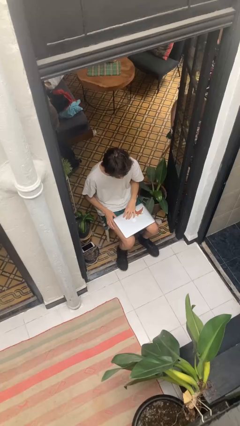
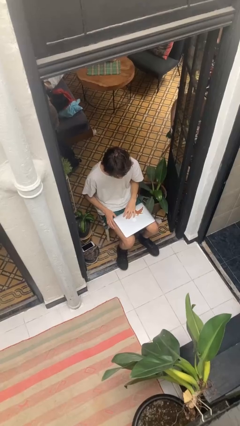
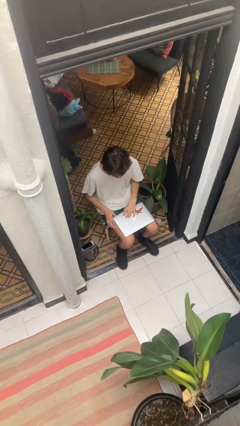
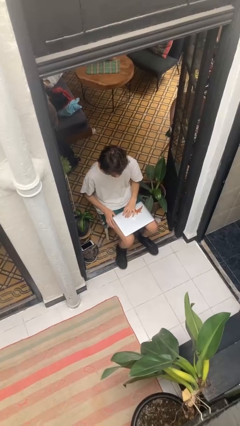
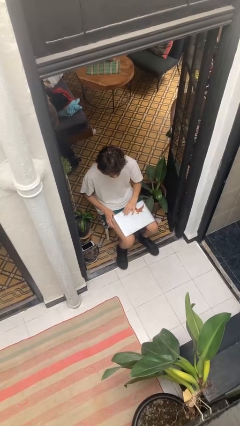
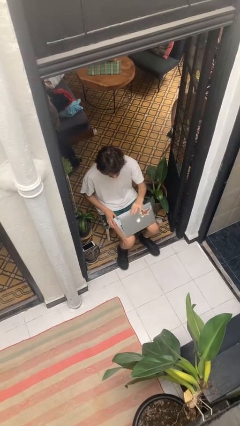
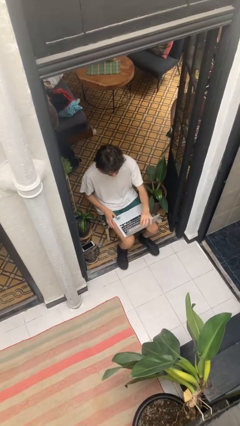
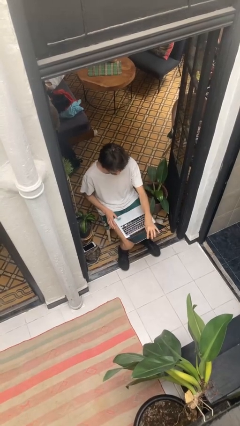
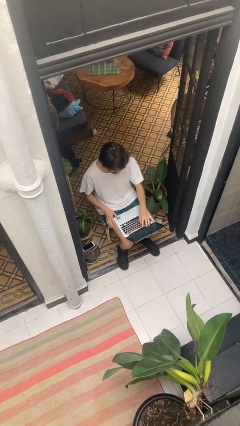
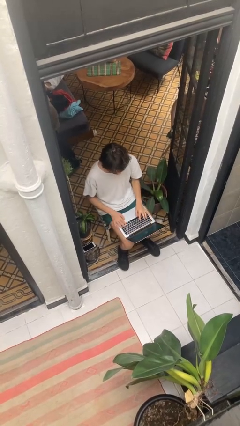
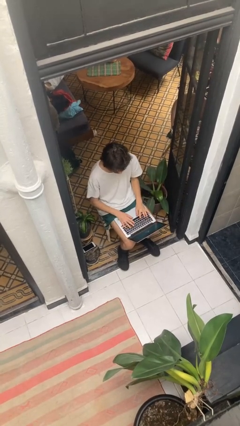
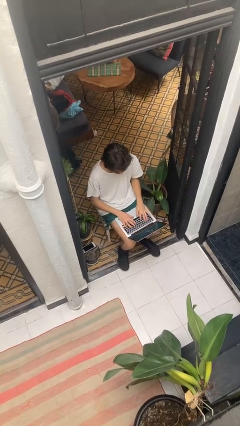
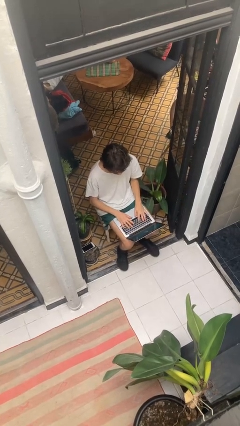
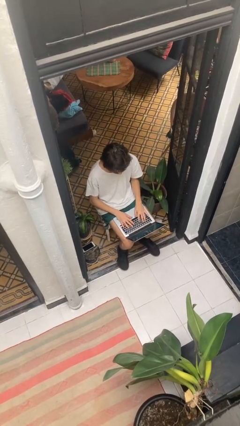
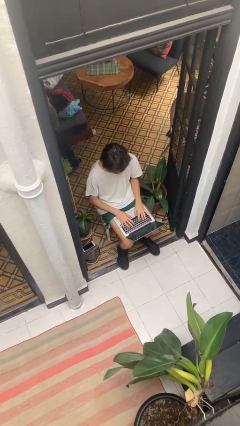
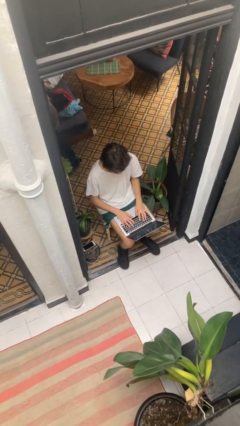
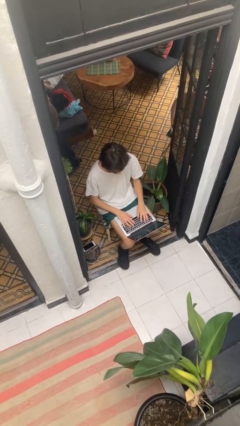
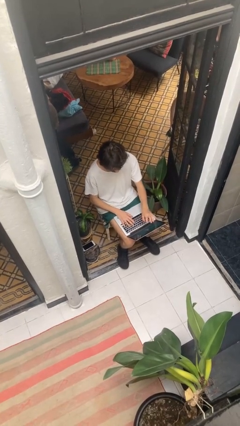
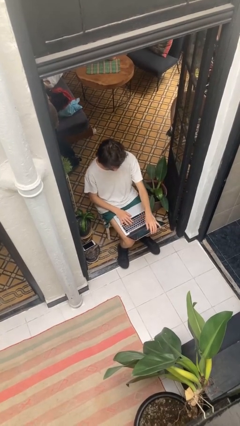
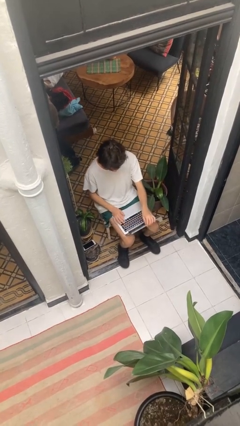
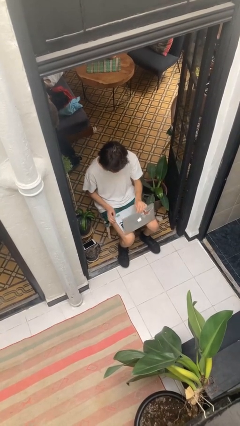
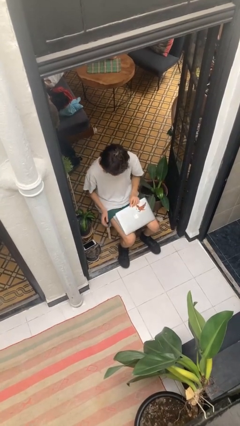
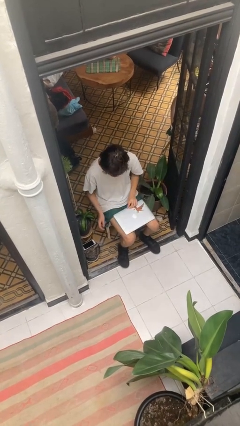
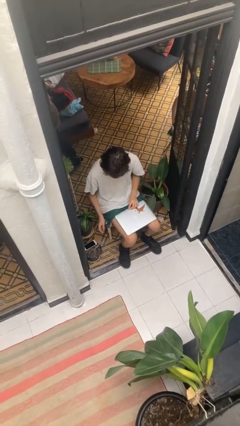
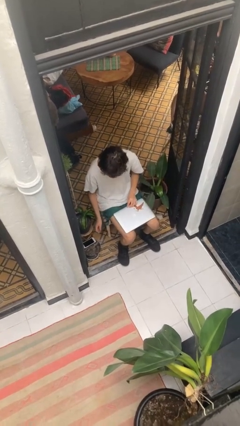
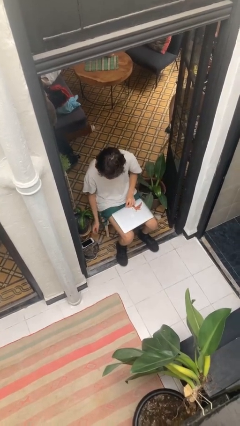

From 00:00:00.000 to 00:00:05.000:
person interacts with laptop

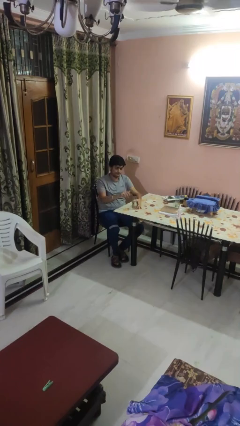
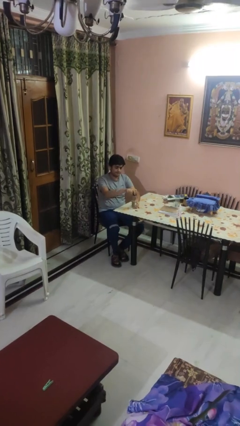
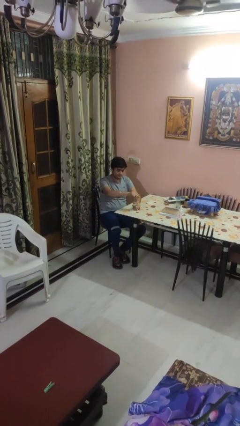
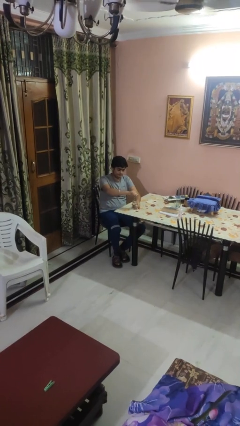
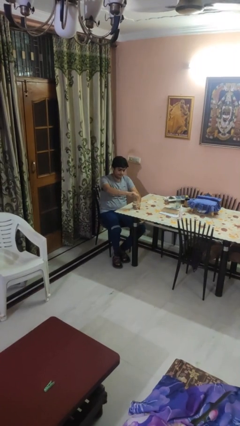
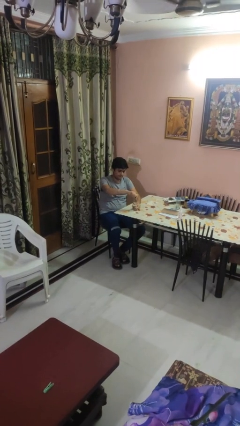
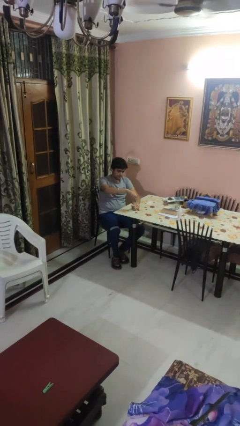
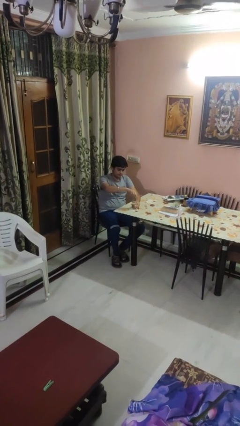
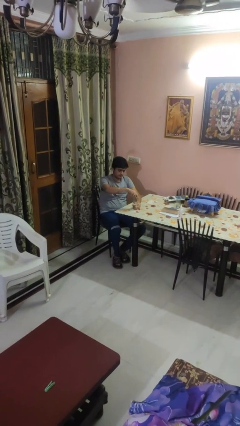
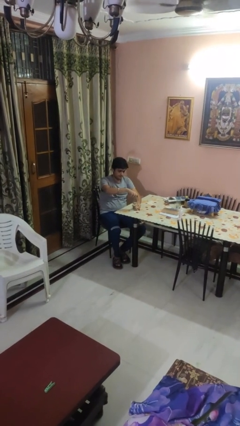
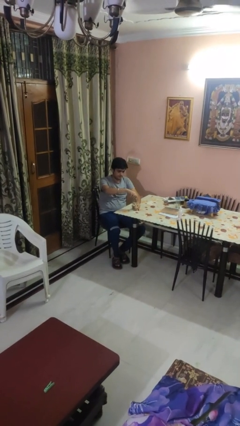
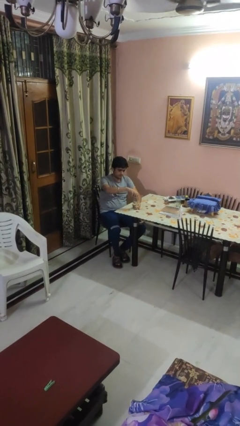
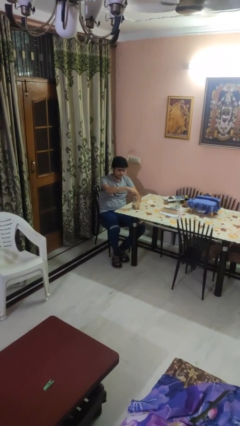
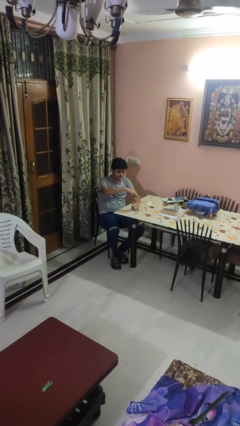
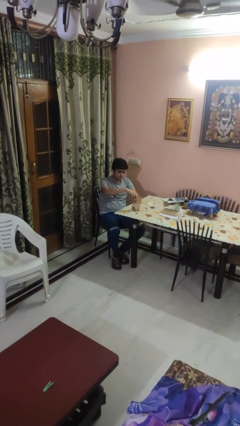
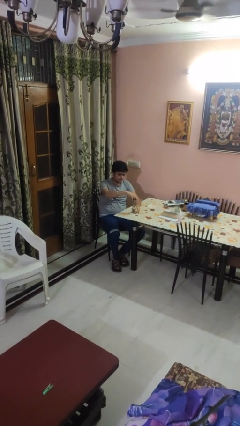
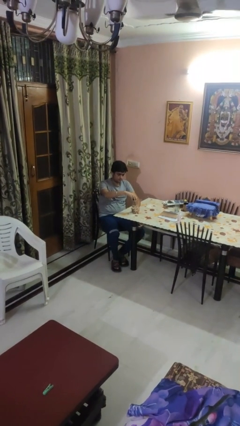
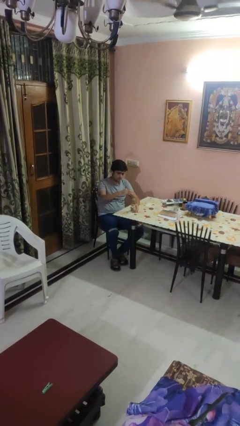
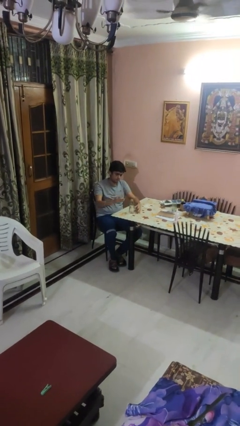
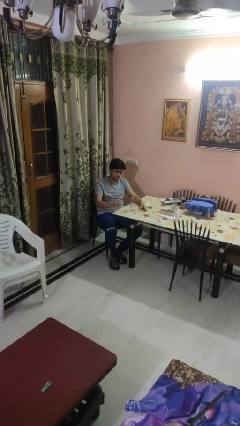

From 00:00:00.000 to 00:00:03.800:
person unscrews lid from bottle

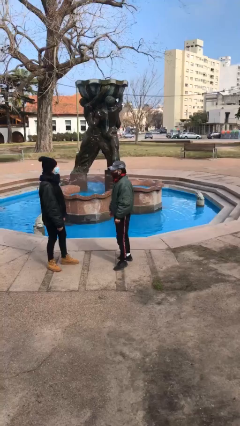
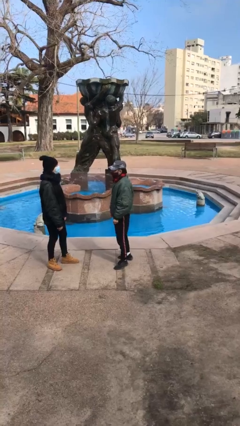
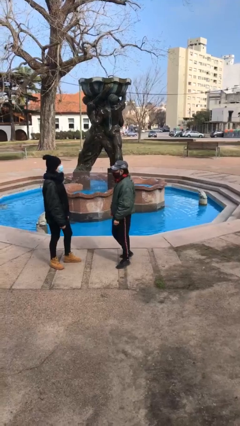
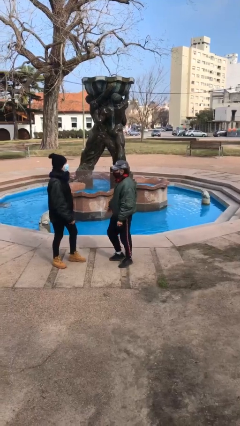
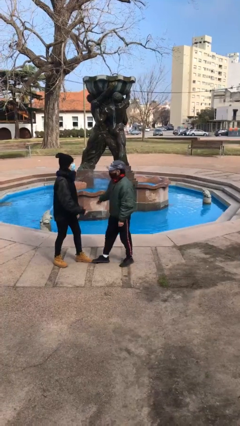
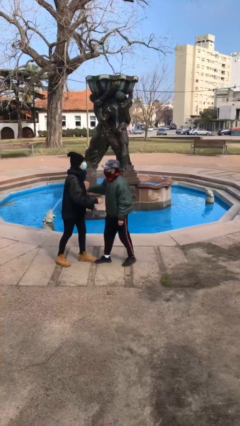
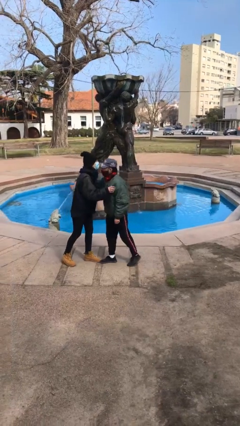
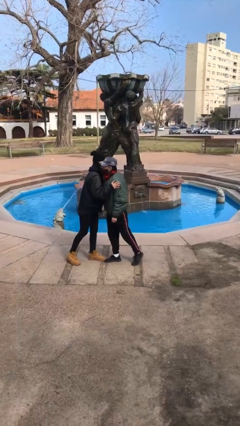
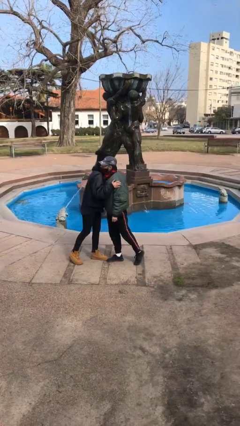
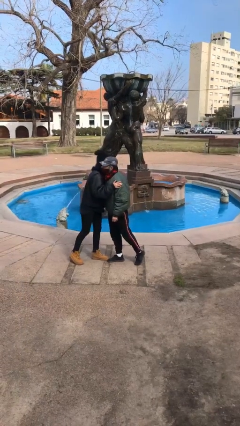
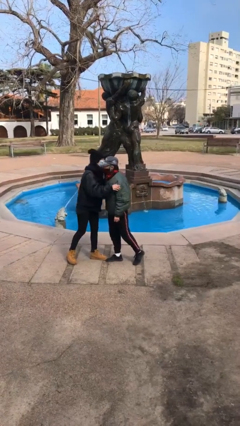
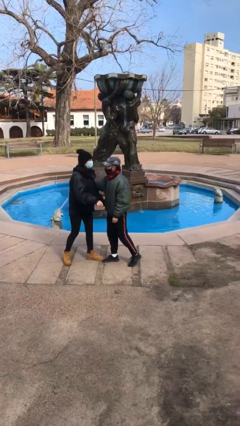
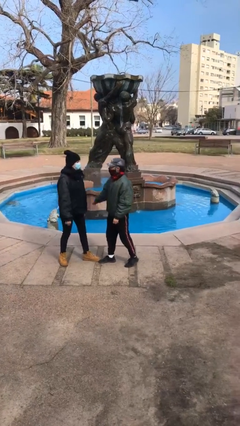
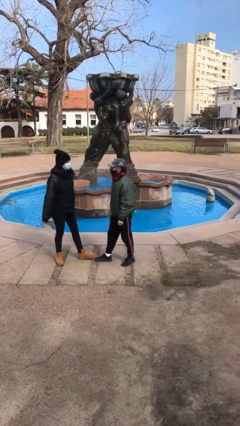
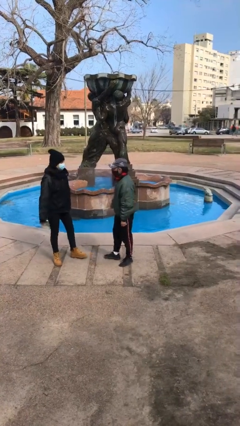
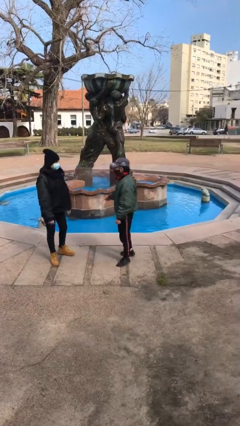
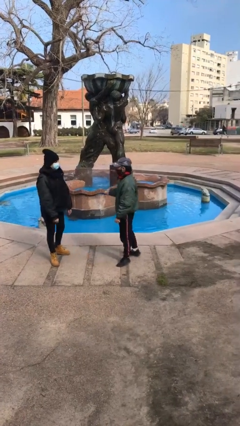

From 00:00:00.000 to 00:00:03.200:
person kisses cheek of person

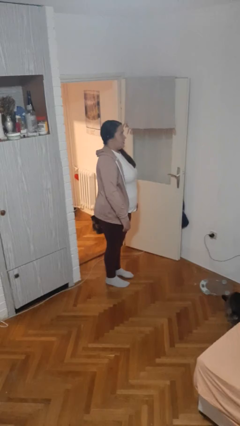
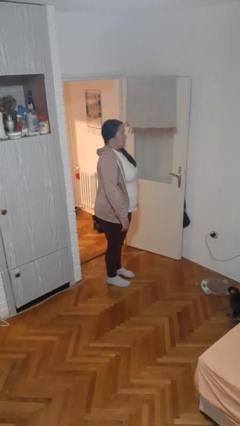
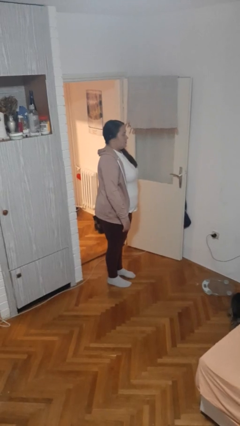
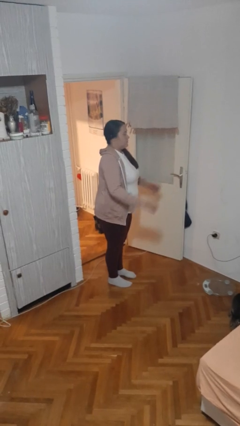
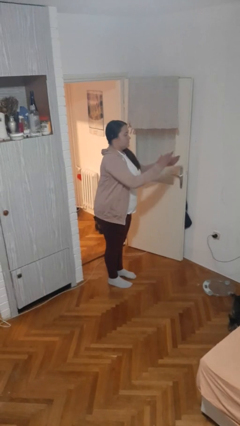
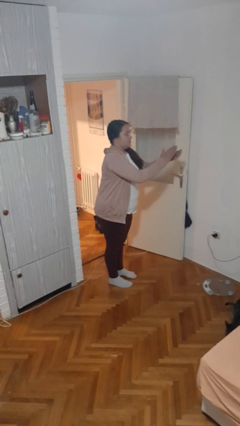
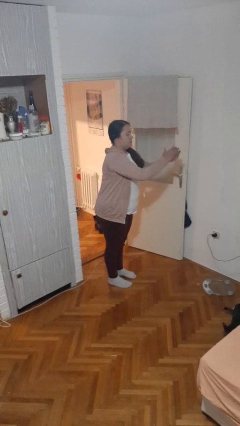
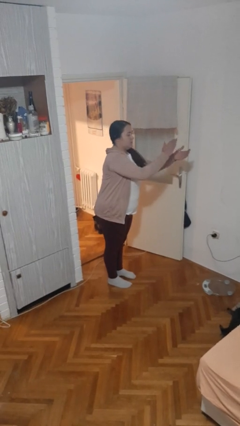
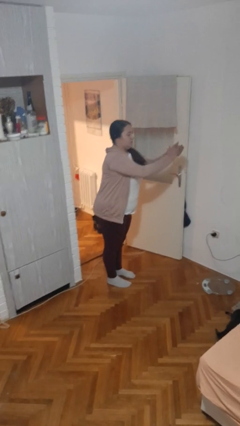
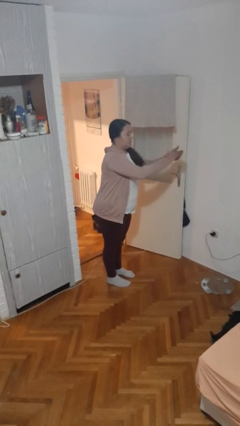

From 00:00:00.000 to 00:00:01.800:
person claps hands

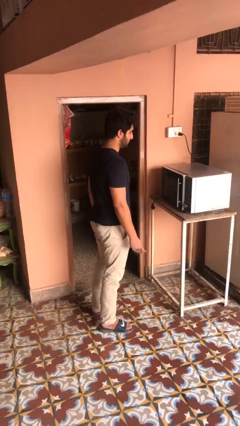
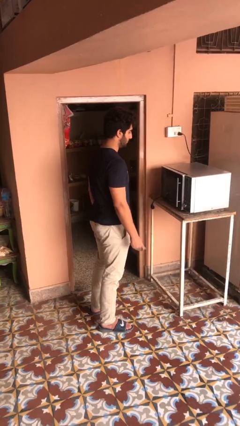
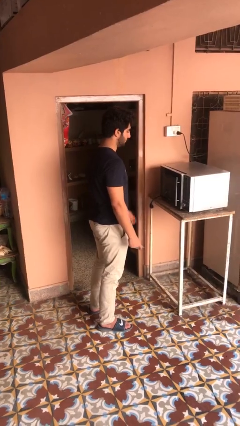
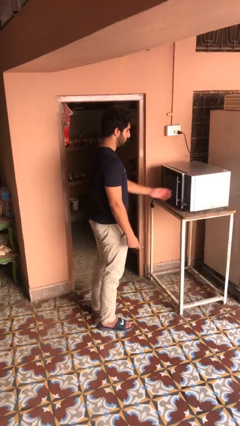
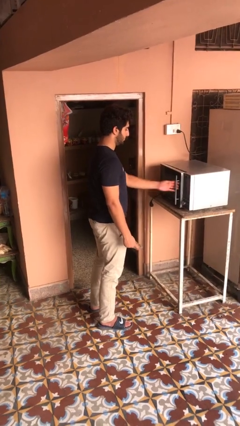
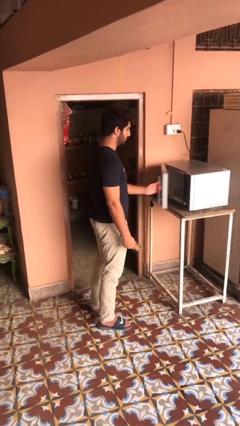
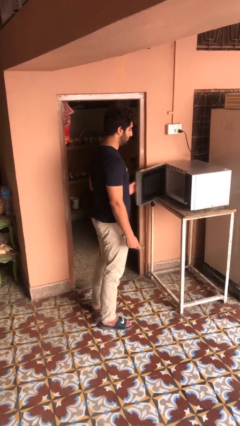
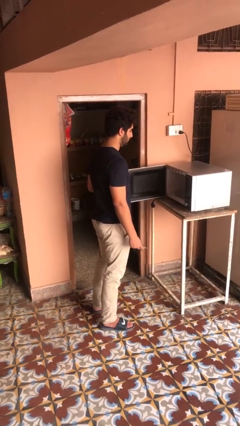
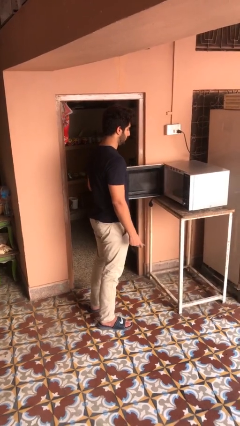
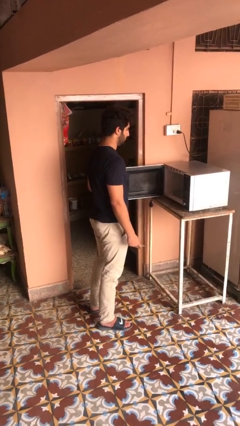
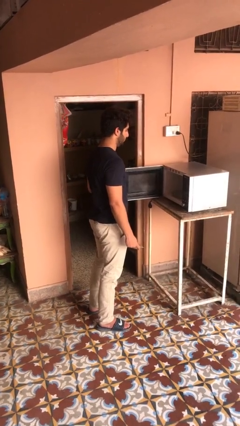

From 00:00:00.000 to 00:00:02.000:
person opens microwave

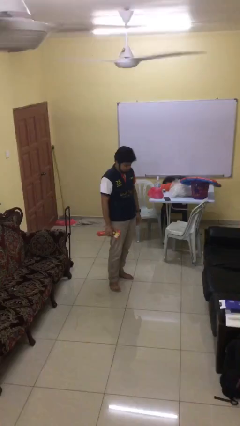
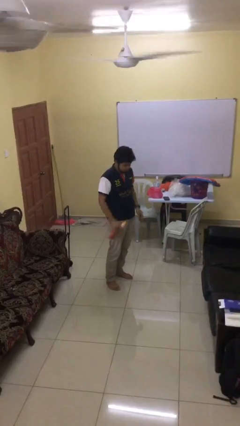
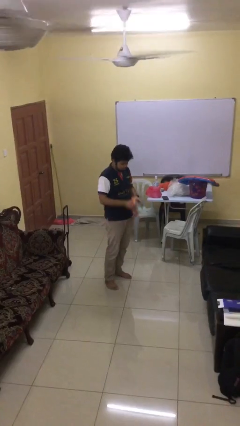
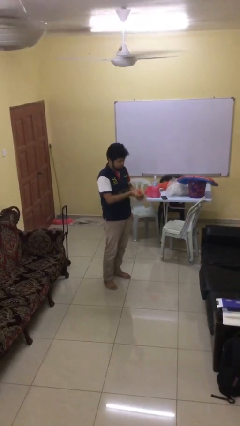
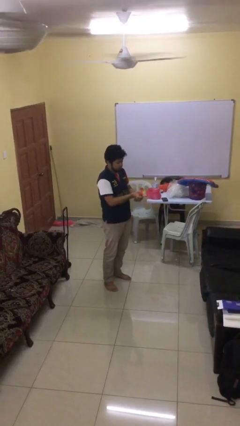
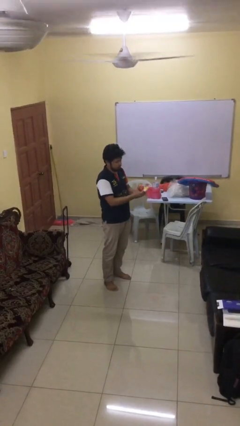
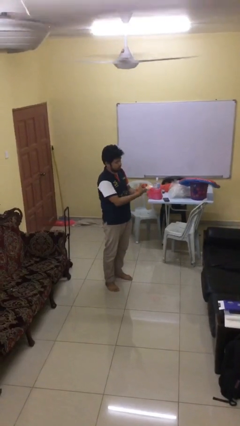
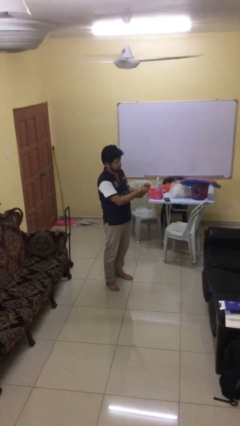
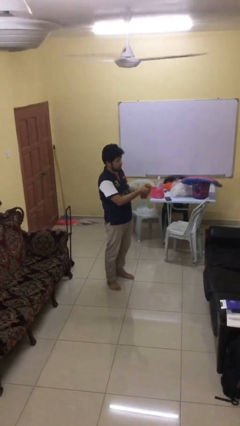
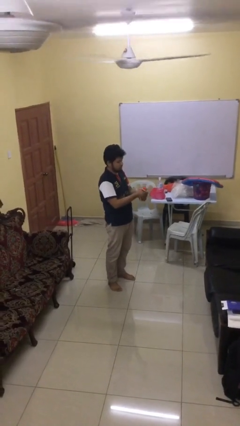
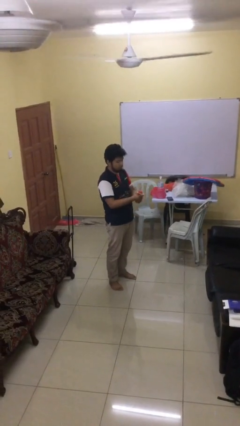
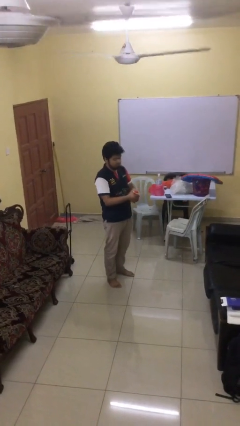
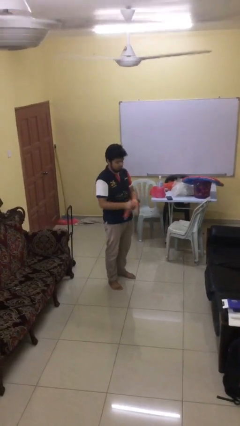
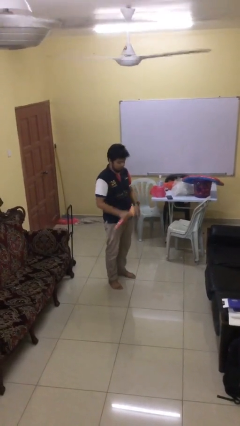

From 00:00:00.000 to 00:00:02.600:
person squeezes object
